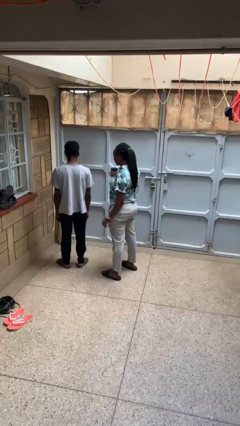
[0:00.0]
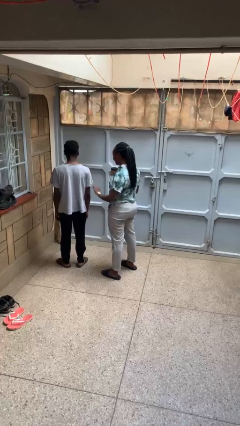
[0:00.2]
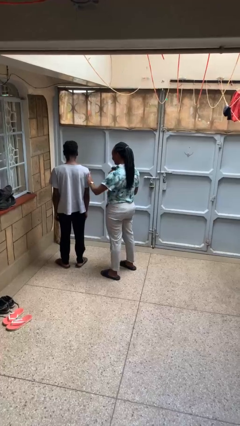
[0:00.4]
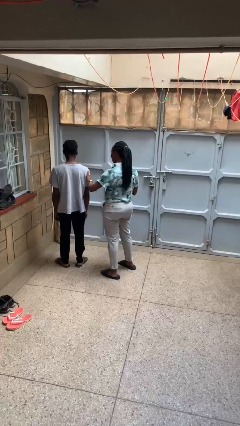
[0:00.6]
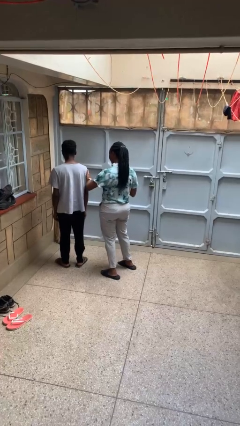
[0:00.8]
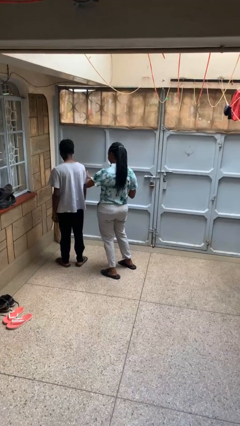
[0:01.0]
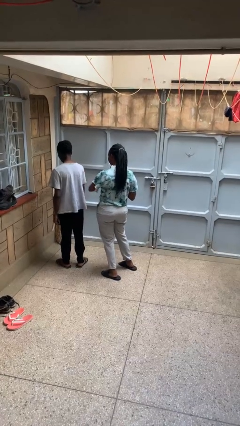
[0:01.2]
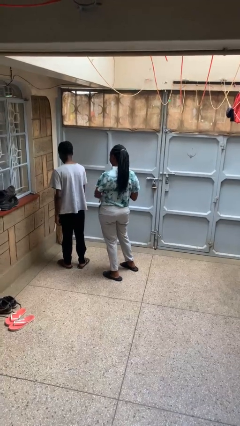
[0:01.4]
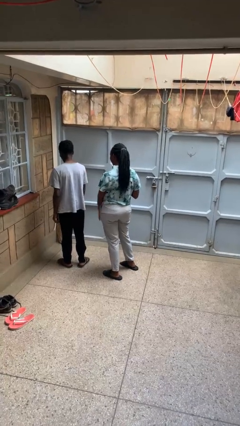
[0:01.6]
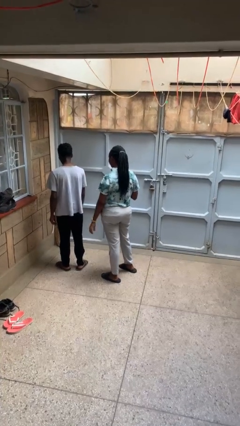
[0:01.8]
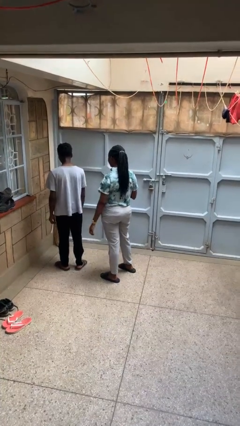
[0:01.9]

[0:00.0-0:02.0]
person shoves person

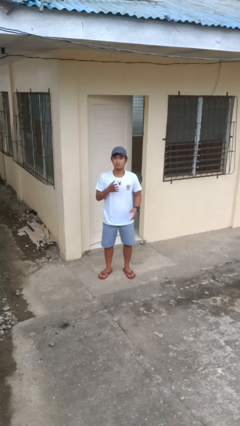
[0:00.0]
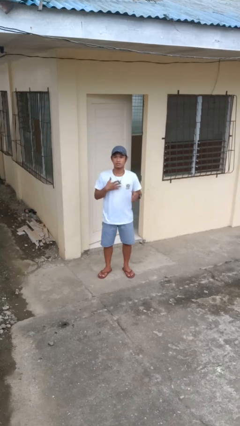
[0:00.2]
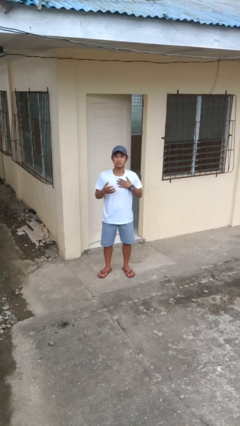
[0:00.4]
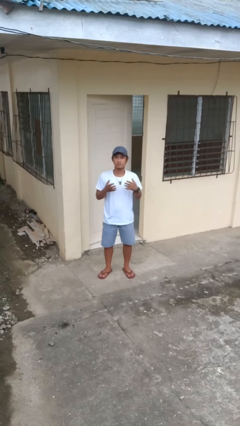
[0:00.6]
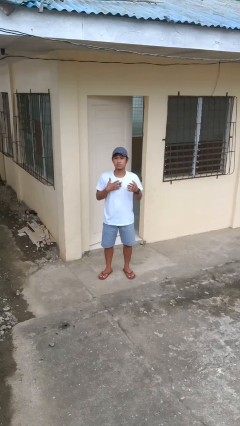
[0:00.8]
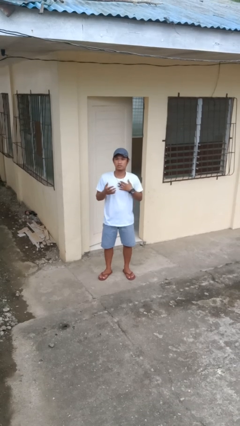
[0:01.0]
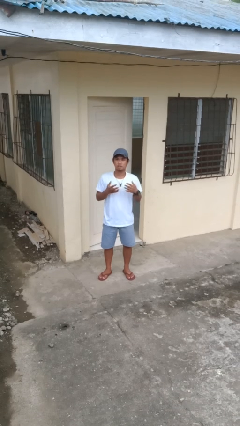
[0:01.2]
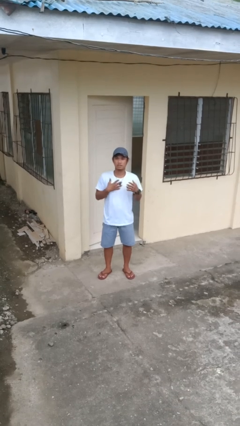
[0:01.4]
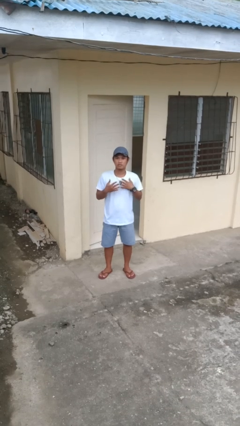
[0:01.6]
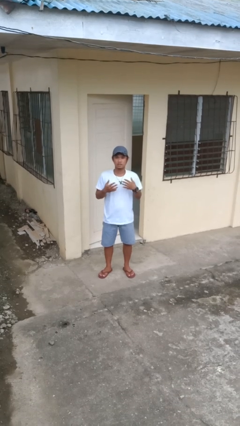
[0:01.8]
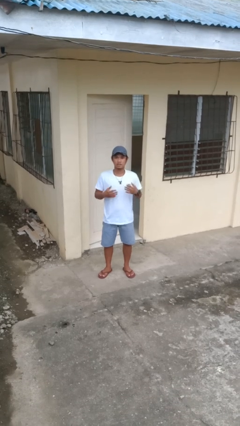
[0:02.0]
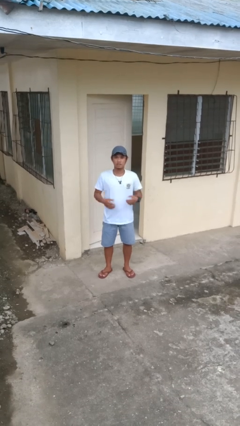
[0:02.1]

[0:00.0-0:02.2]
person drums on chest

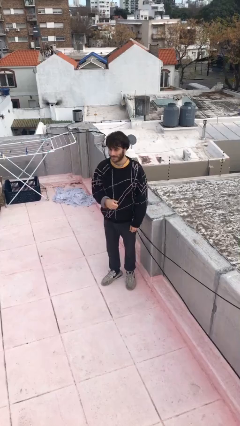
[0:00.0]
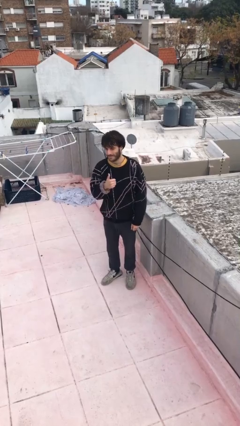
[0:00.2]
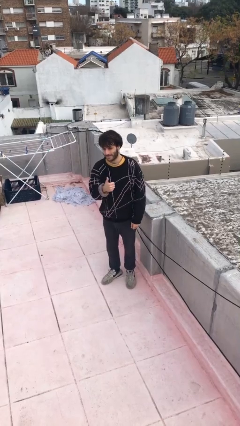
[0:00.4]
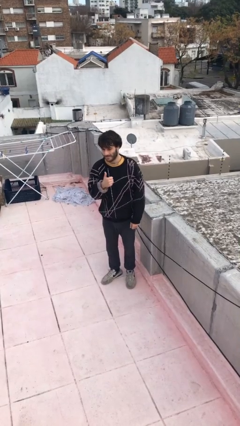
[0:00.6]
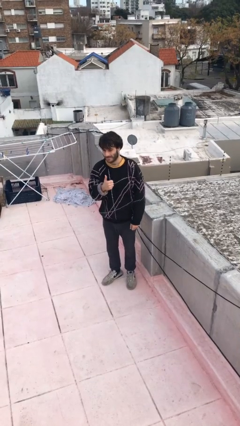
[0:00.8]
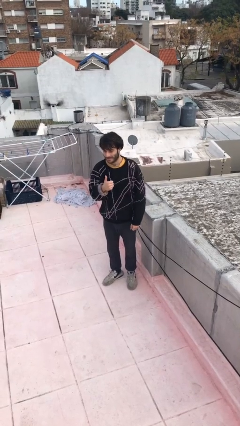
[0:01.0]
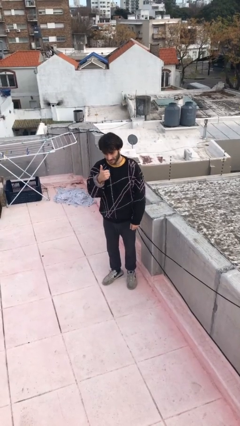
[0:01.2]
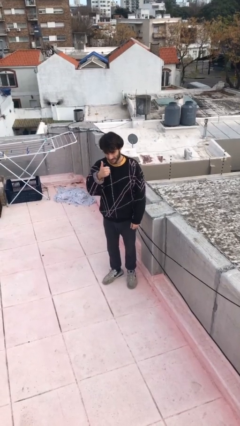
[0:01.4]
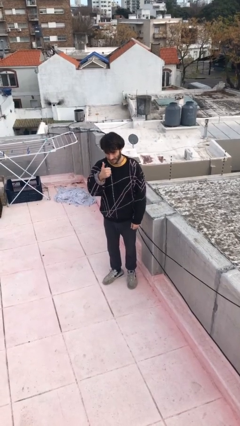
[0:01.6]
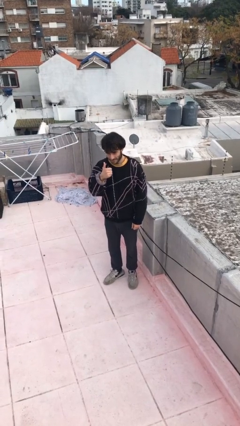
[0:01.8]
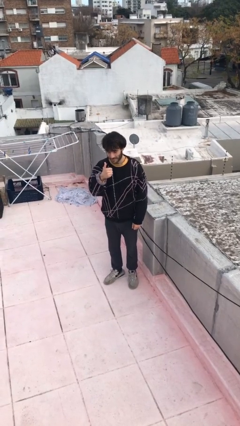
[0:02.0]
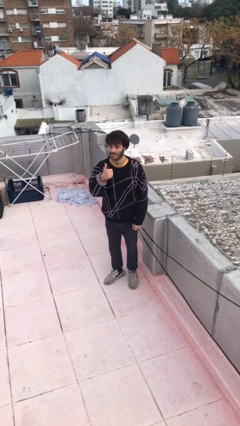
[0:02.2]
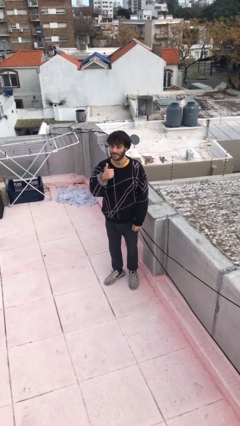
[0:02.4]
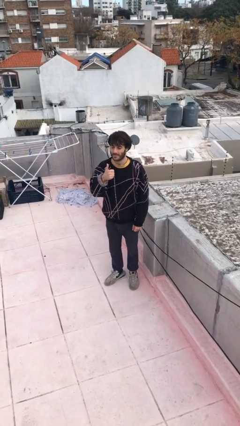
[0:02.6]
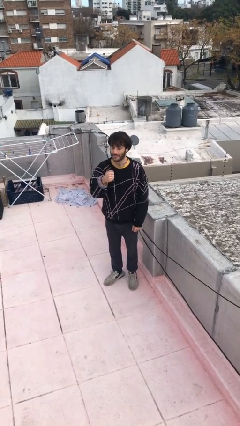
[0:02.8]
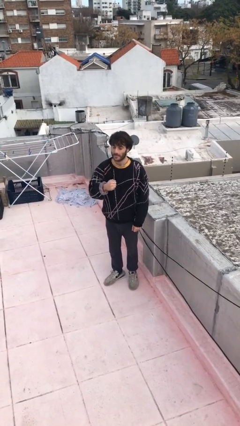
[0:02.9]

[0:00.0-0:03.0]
person gestures thumbs up

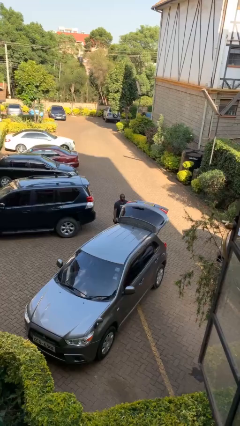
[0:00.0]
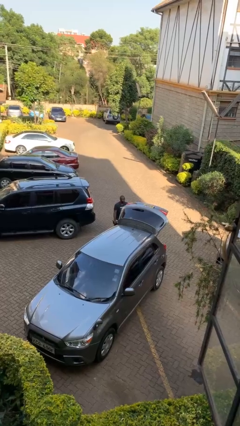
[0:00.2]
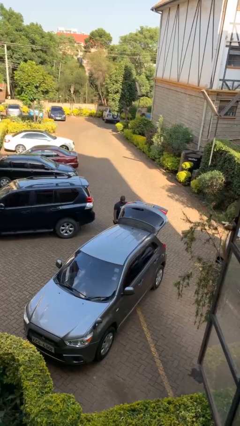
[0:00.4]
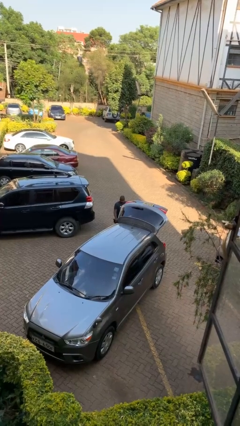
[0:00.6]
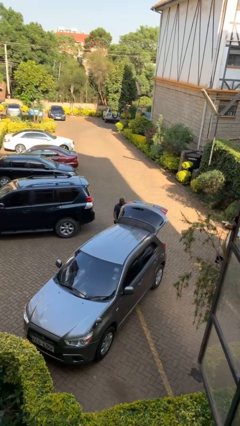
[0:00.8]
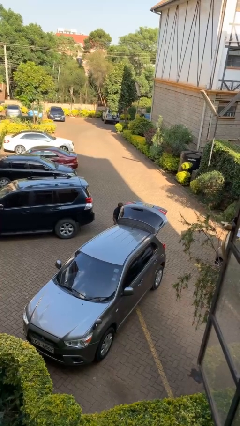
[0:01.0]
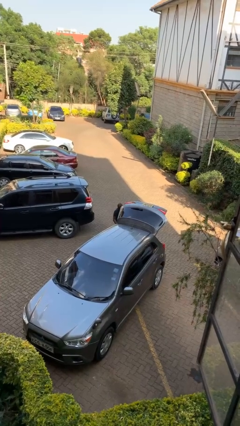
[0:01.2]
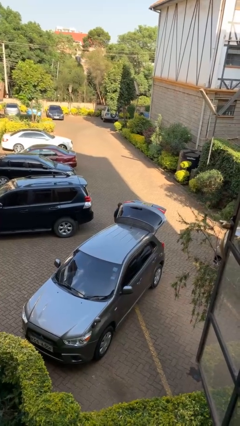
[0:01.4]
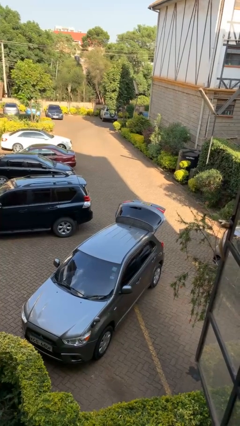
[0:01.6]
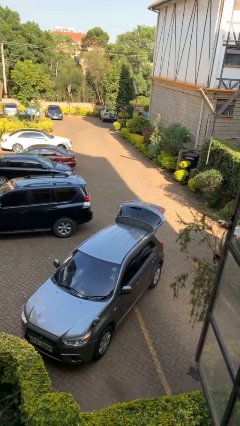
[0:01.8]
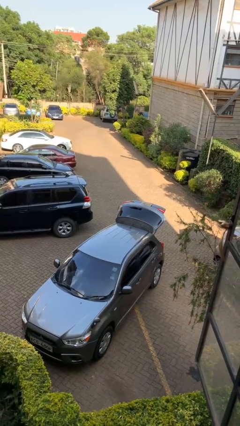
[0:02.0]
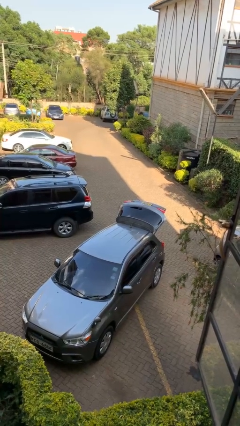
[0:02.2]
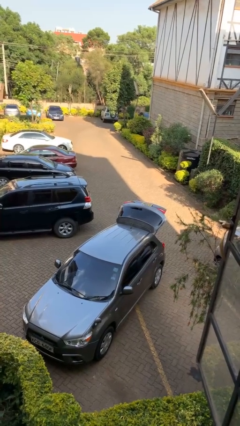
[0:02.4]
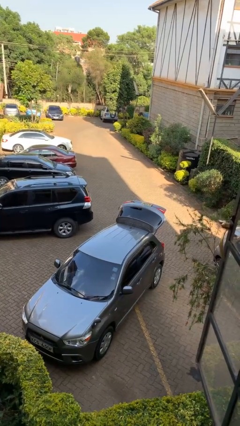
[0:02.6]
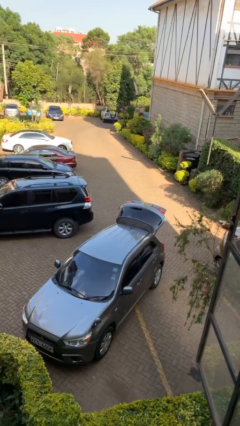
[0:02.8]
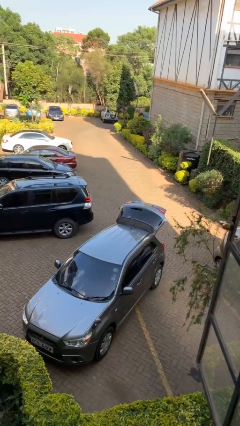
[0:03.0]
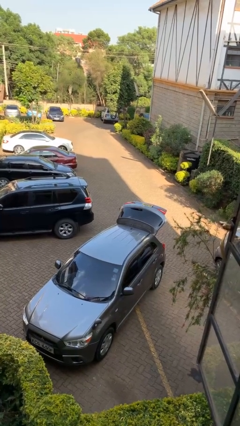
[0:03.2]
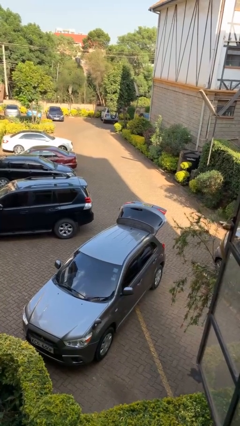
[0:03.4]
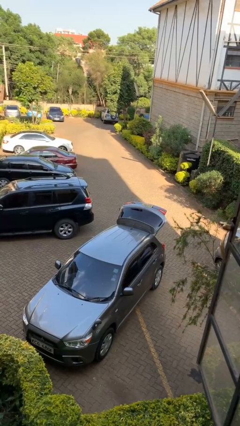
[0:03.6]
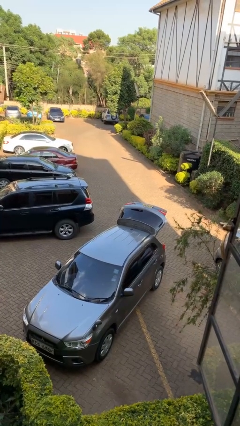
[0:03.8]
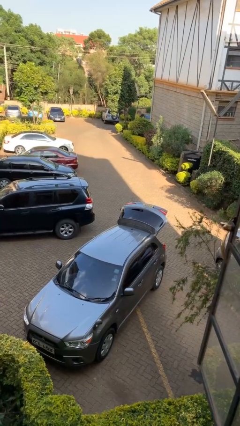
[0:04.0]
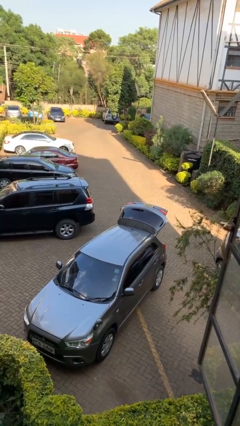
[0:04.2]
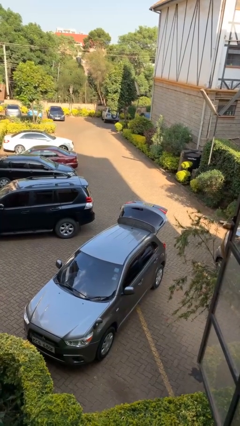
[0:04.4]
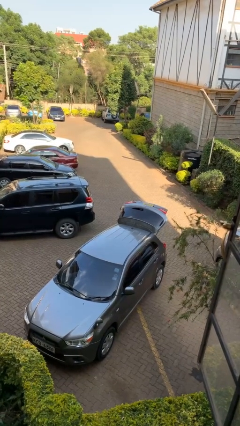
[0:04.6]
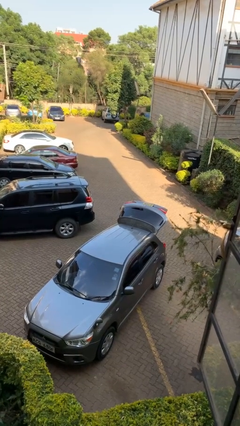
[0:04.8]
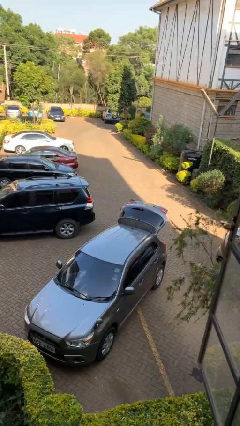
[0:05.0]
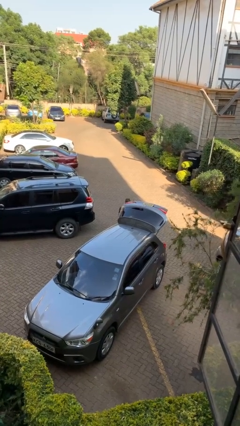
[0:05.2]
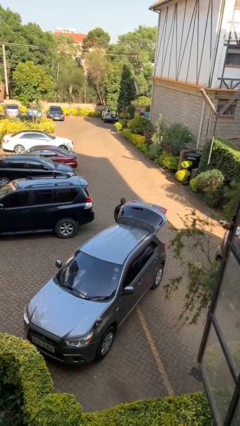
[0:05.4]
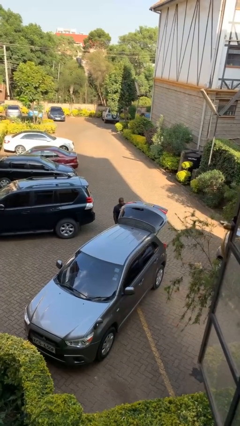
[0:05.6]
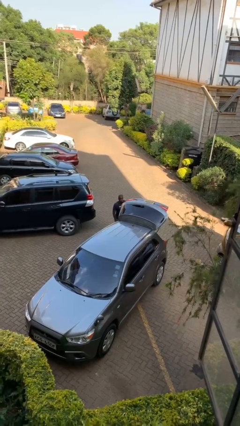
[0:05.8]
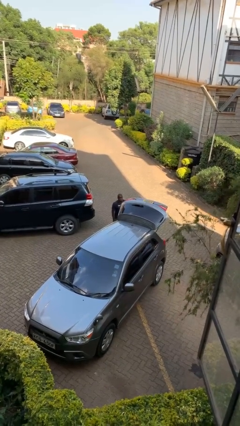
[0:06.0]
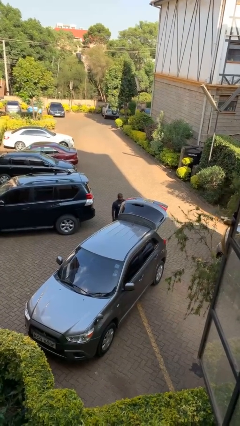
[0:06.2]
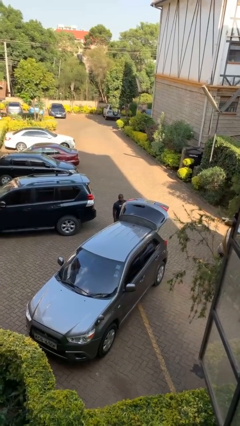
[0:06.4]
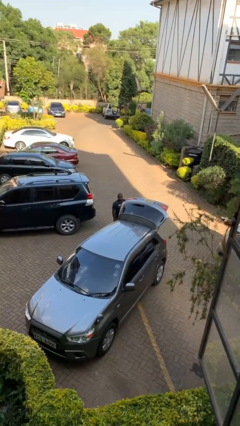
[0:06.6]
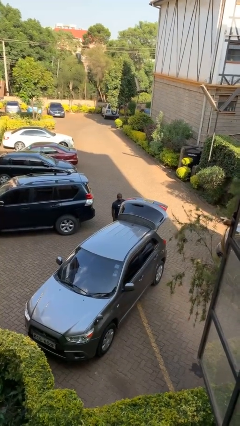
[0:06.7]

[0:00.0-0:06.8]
person loads car

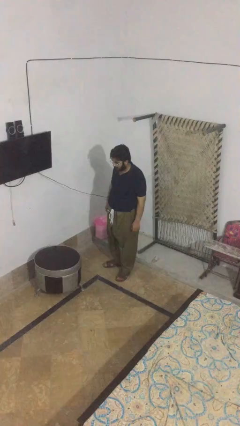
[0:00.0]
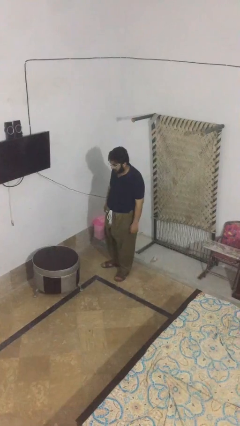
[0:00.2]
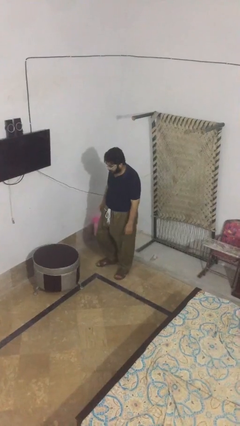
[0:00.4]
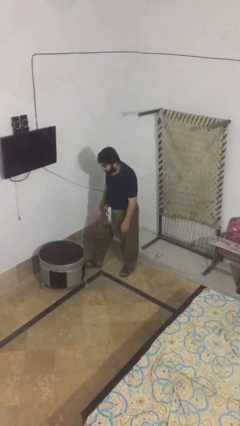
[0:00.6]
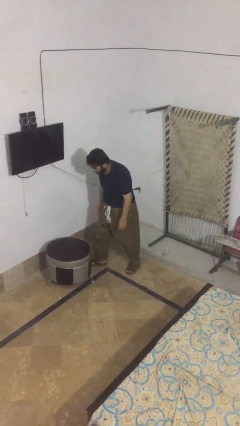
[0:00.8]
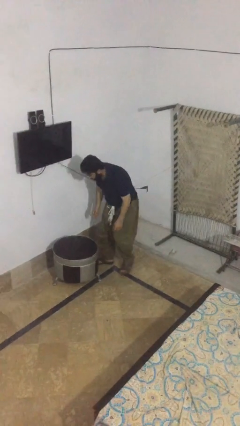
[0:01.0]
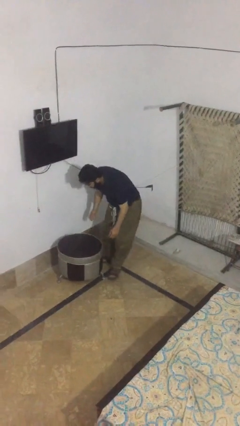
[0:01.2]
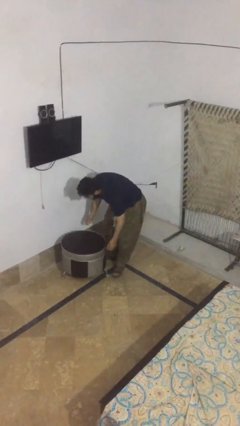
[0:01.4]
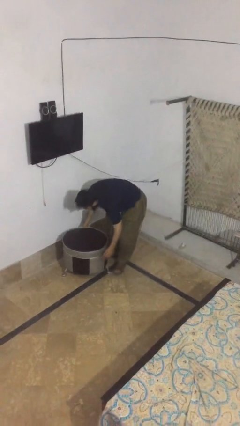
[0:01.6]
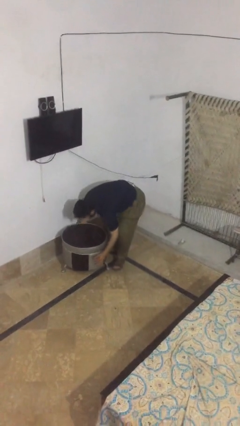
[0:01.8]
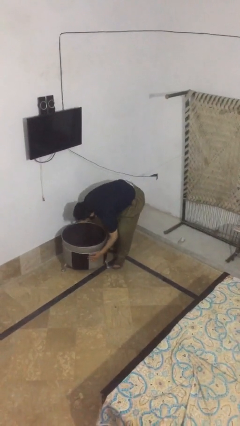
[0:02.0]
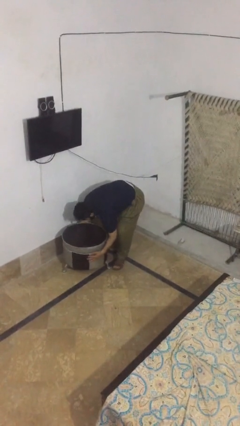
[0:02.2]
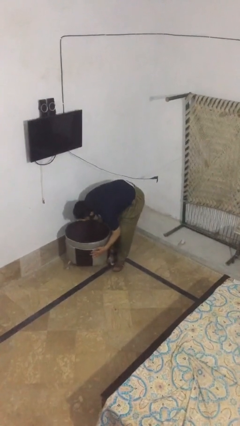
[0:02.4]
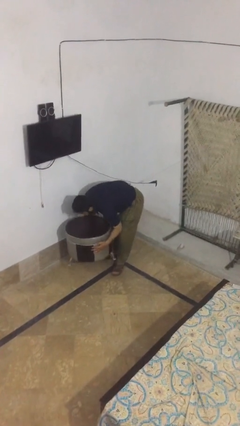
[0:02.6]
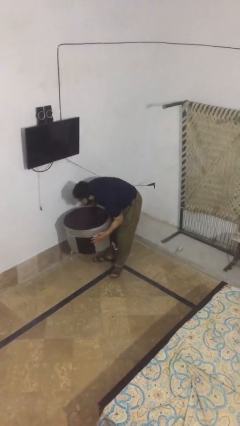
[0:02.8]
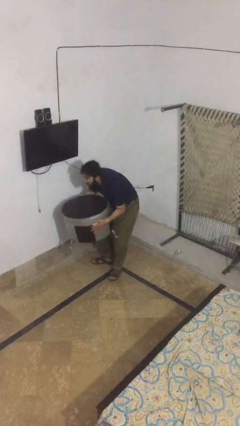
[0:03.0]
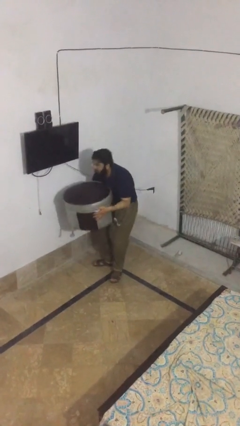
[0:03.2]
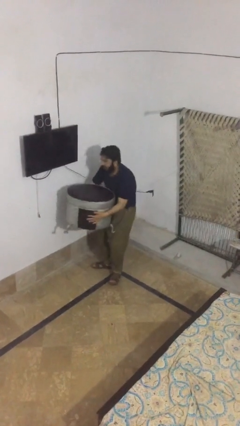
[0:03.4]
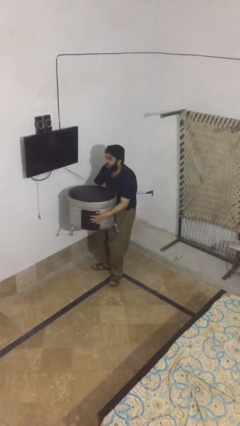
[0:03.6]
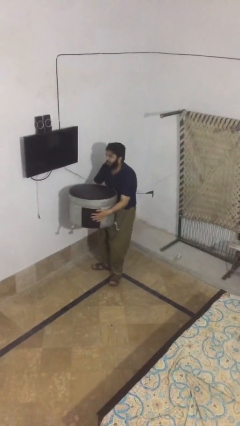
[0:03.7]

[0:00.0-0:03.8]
person picks up object from floor
